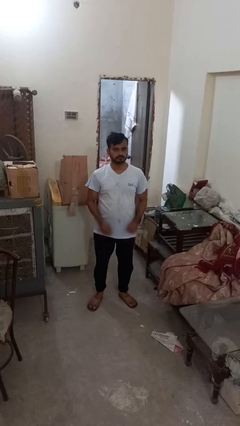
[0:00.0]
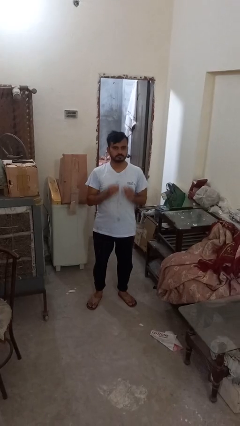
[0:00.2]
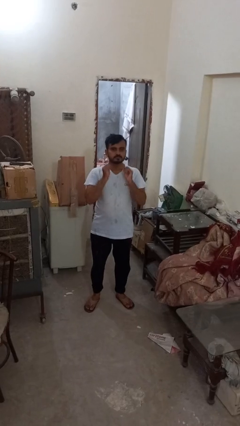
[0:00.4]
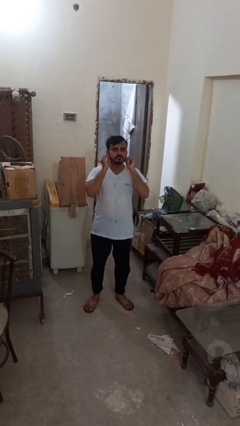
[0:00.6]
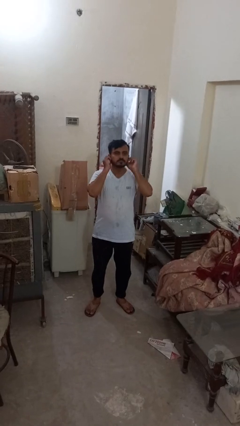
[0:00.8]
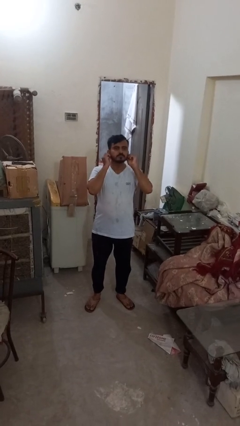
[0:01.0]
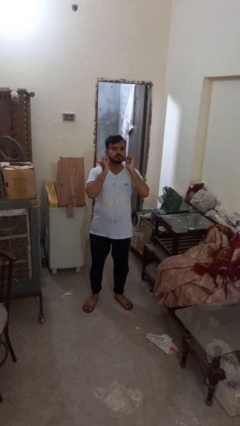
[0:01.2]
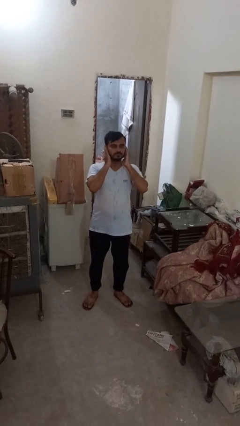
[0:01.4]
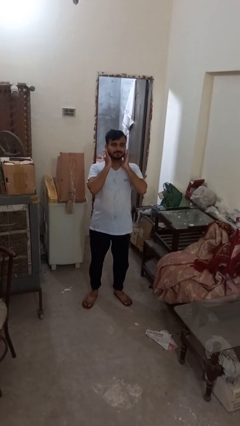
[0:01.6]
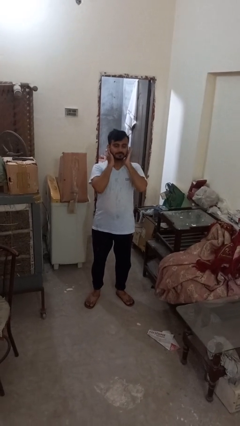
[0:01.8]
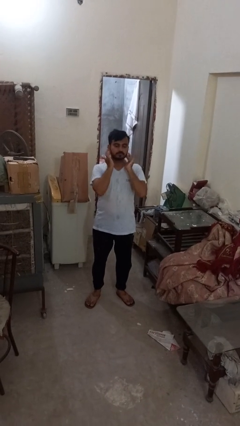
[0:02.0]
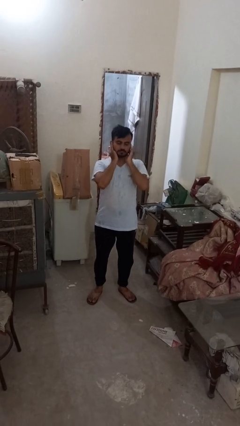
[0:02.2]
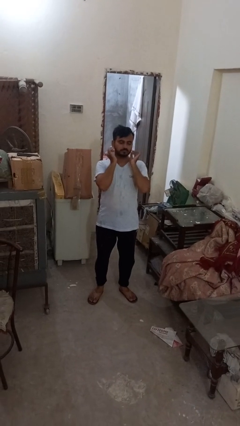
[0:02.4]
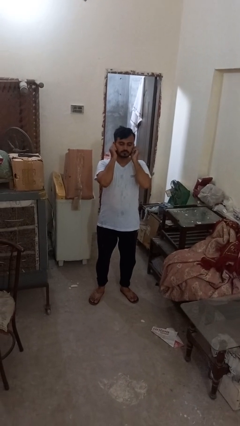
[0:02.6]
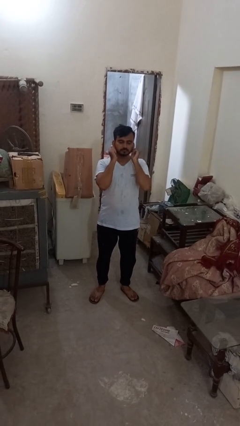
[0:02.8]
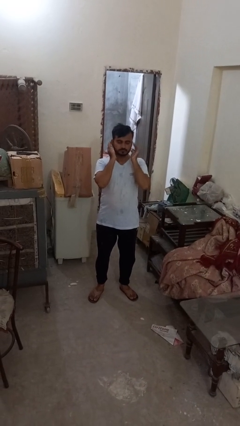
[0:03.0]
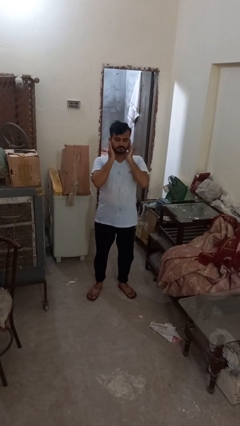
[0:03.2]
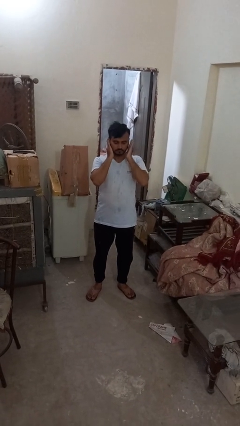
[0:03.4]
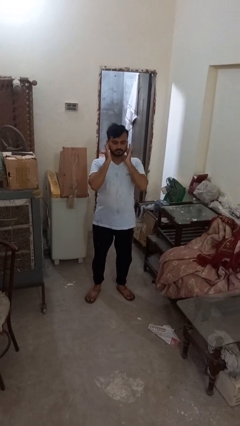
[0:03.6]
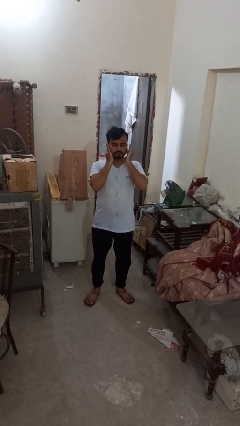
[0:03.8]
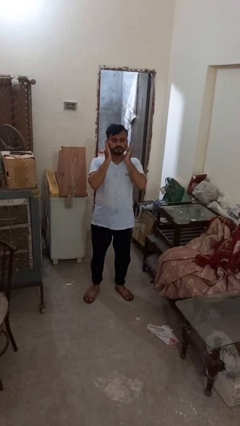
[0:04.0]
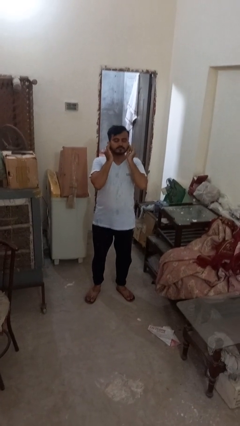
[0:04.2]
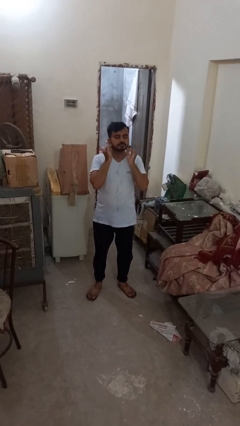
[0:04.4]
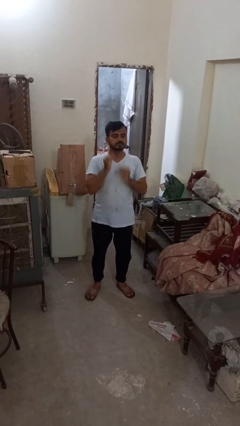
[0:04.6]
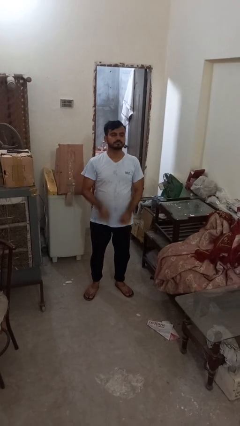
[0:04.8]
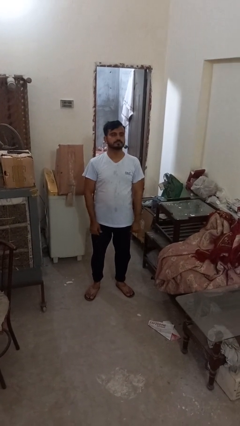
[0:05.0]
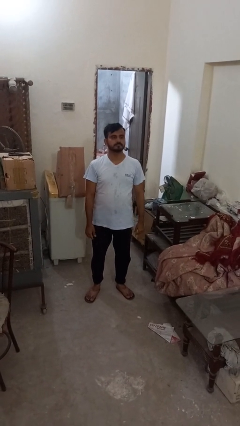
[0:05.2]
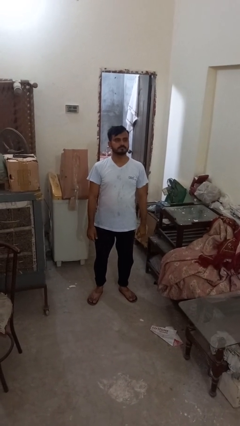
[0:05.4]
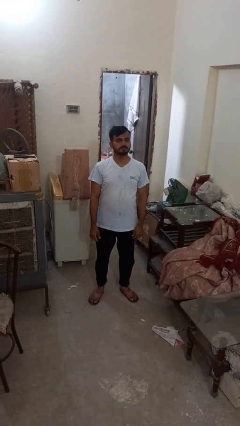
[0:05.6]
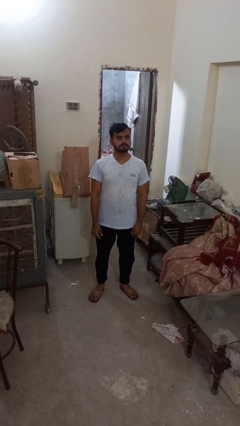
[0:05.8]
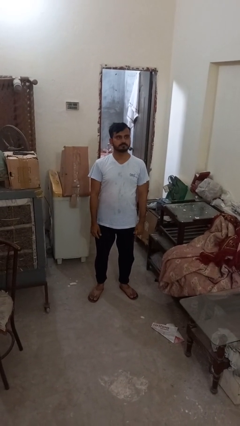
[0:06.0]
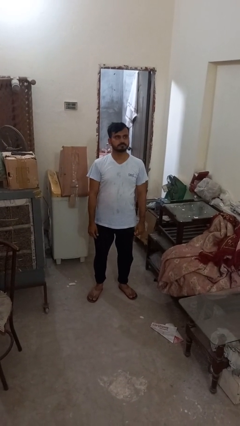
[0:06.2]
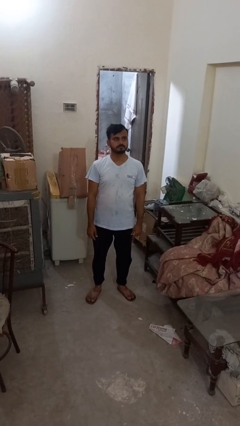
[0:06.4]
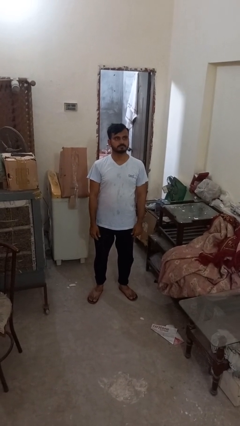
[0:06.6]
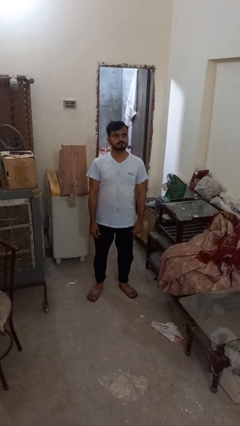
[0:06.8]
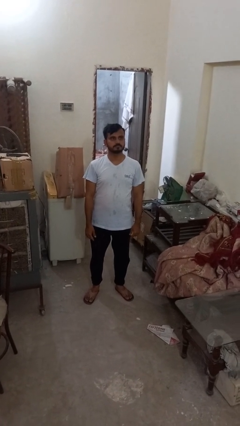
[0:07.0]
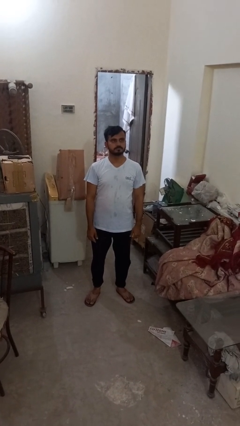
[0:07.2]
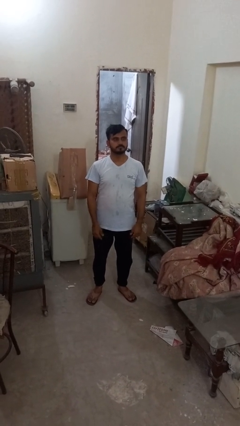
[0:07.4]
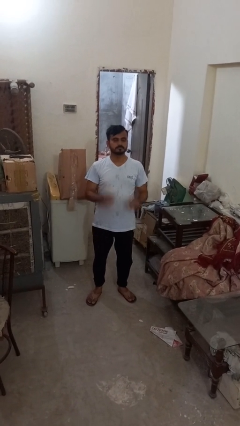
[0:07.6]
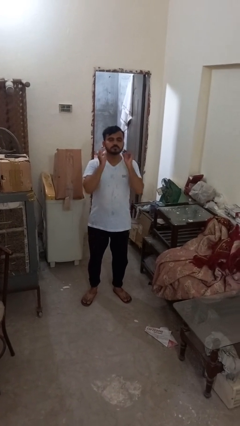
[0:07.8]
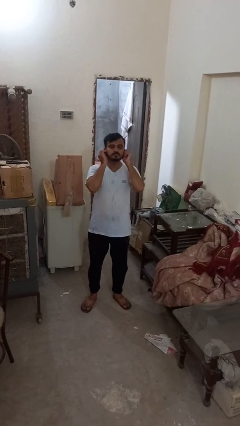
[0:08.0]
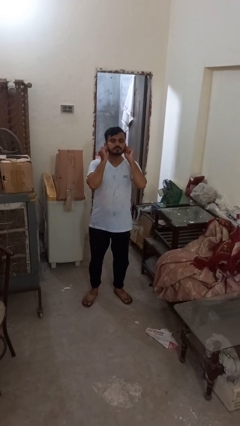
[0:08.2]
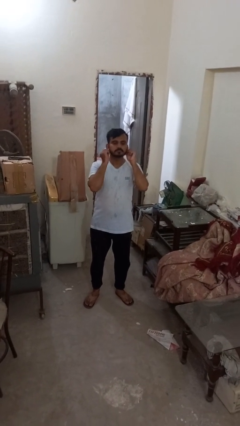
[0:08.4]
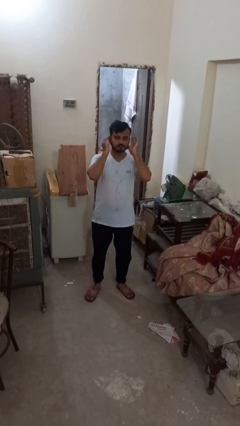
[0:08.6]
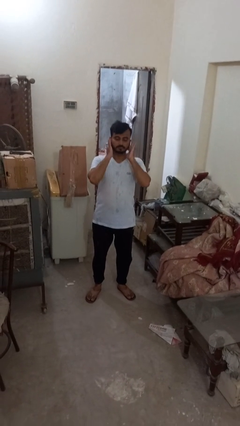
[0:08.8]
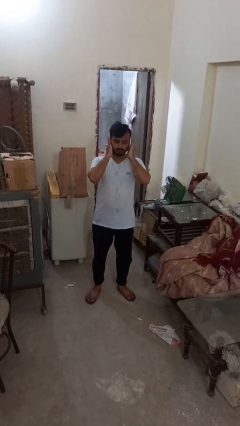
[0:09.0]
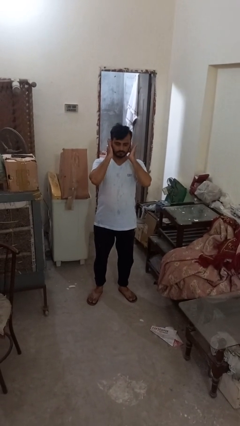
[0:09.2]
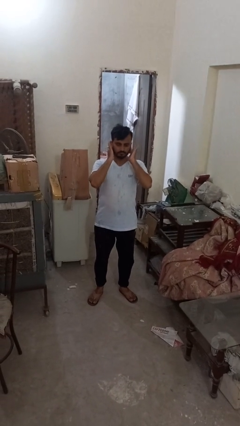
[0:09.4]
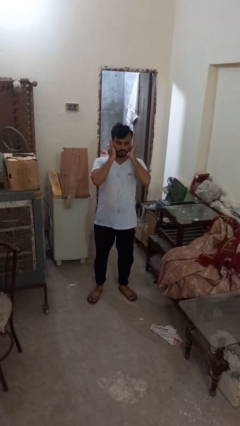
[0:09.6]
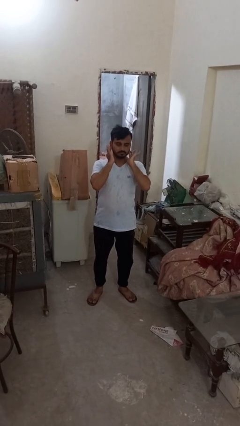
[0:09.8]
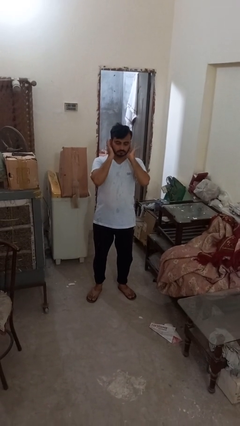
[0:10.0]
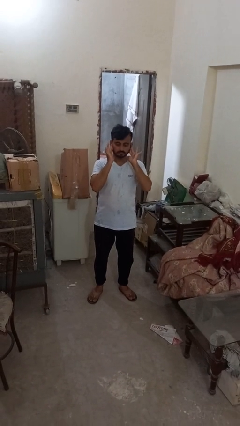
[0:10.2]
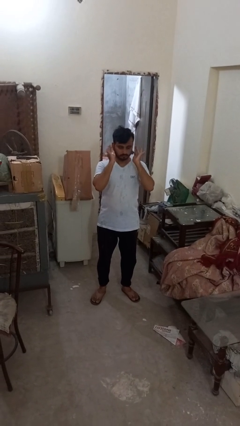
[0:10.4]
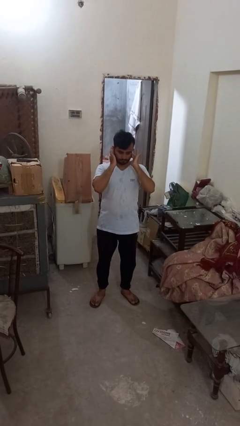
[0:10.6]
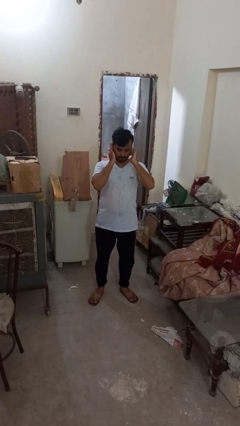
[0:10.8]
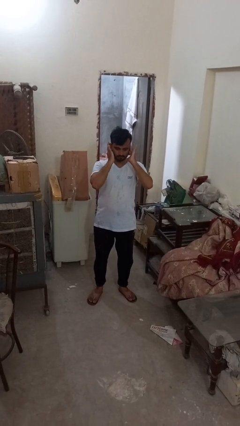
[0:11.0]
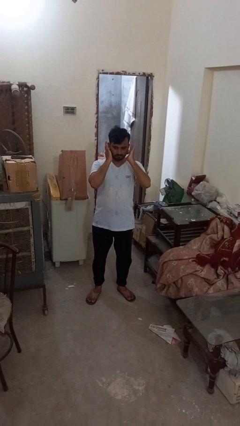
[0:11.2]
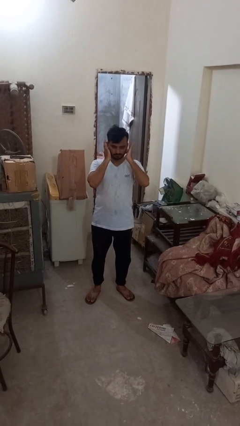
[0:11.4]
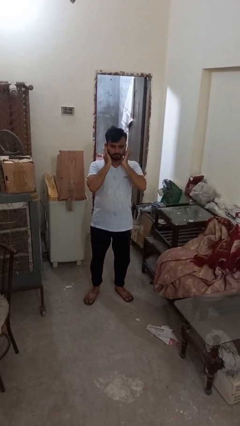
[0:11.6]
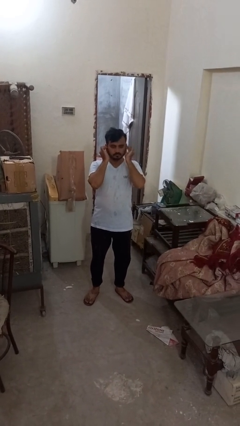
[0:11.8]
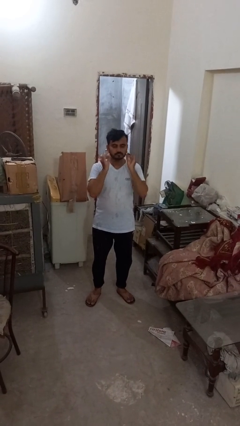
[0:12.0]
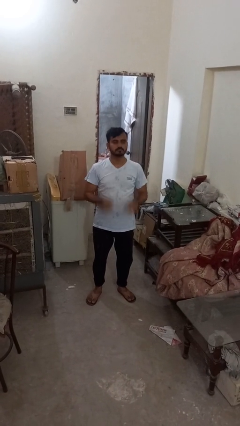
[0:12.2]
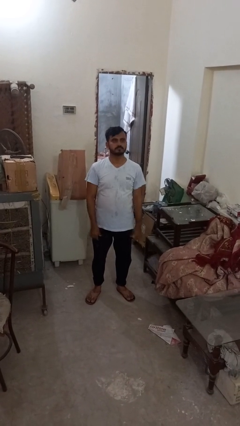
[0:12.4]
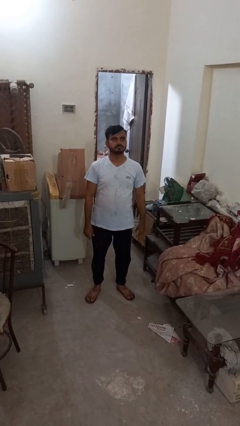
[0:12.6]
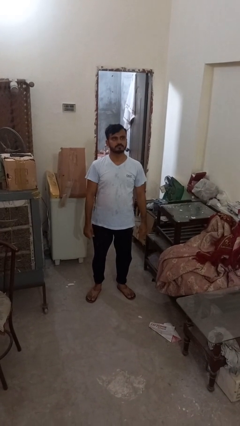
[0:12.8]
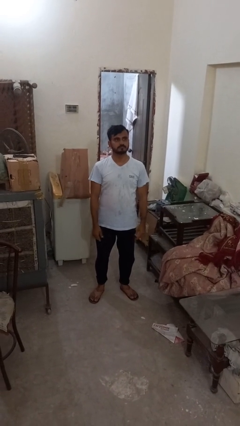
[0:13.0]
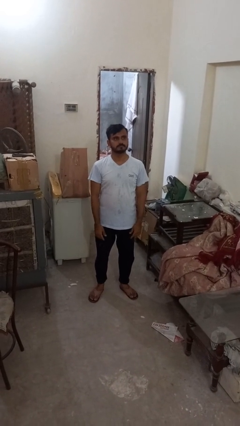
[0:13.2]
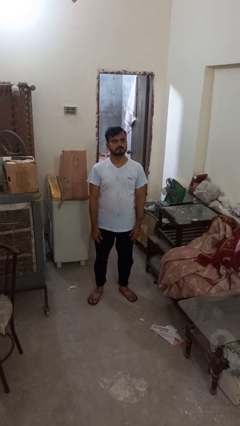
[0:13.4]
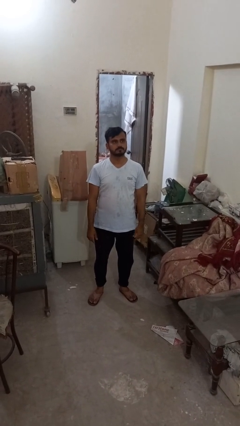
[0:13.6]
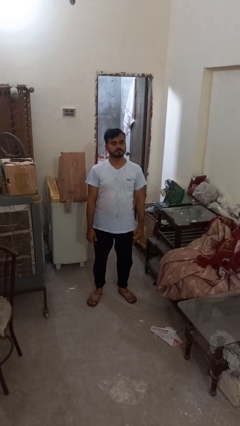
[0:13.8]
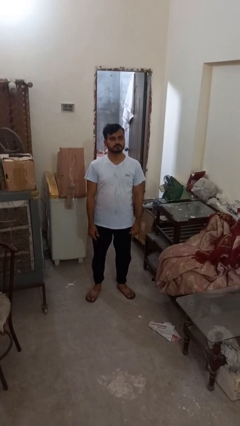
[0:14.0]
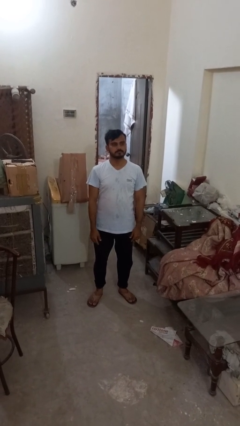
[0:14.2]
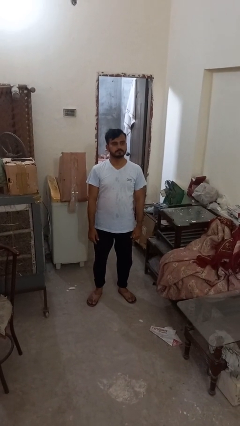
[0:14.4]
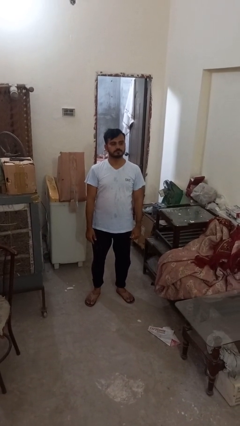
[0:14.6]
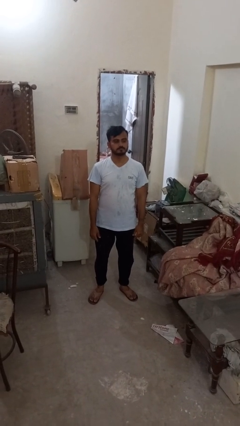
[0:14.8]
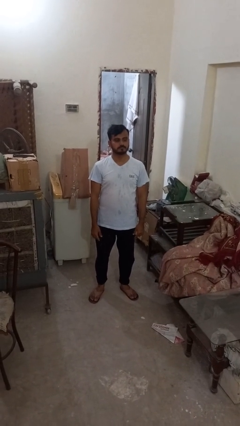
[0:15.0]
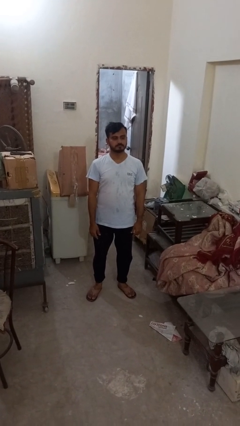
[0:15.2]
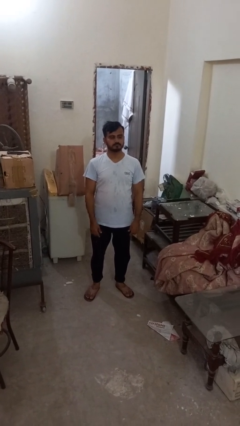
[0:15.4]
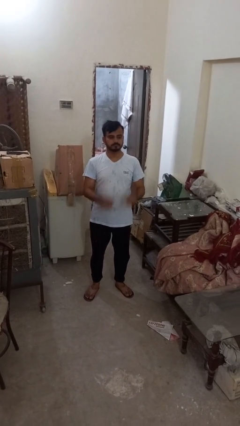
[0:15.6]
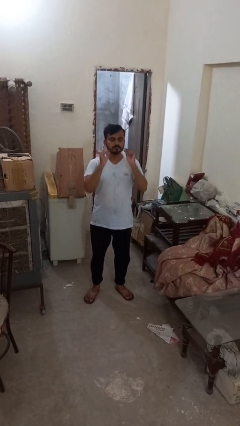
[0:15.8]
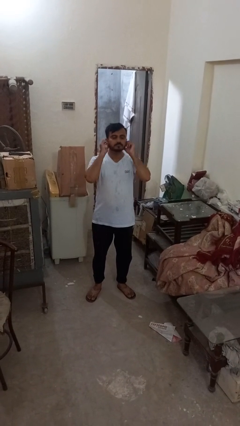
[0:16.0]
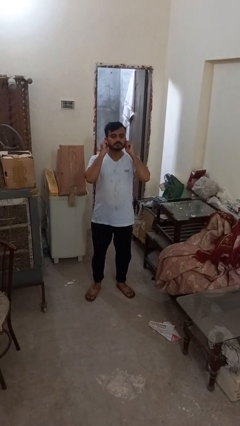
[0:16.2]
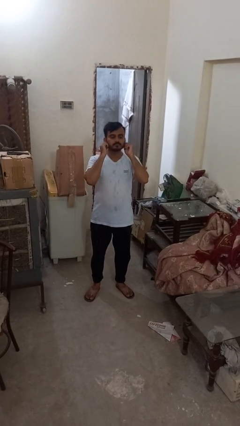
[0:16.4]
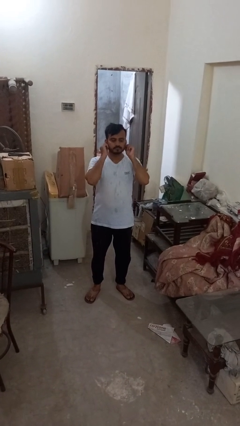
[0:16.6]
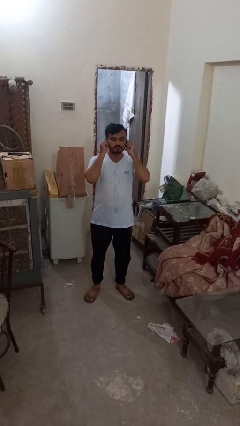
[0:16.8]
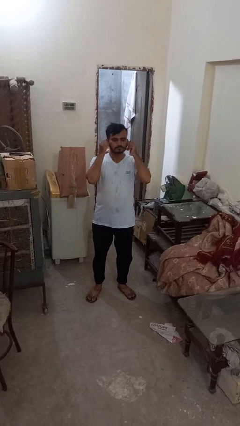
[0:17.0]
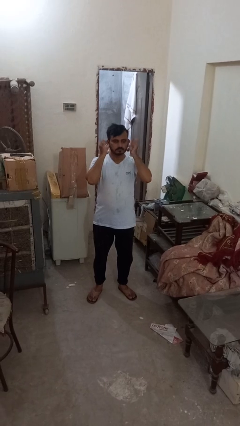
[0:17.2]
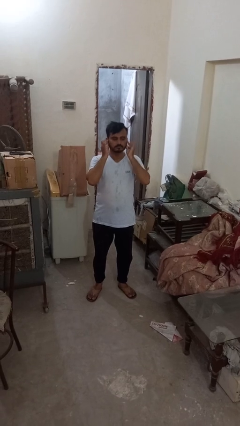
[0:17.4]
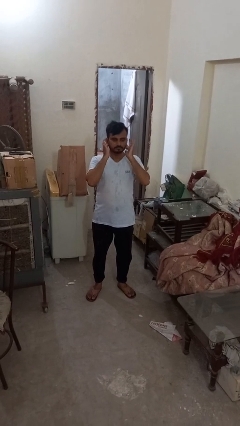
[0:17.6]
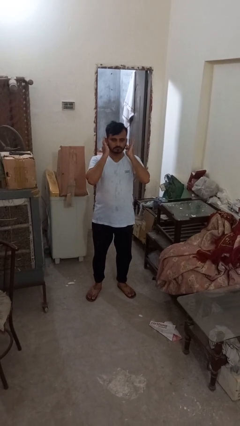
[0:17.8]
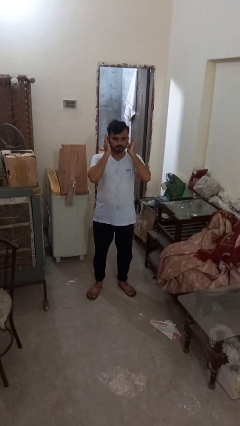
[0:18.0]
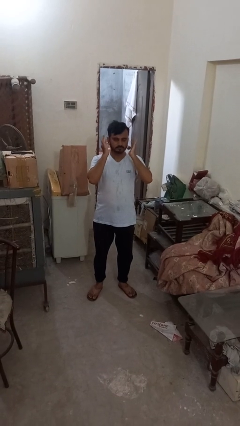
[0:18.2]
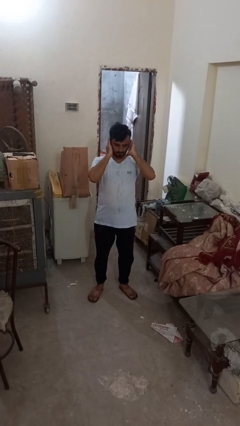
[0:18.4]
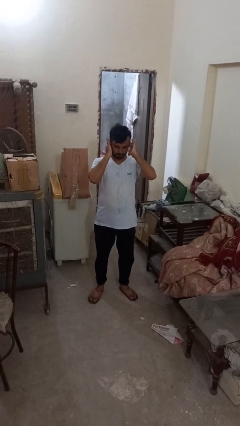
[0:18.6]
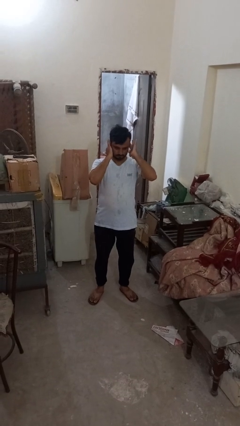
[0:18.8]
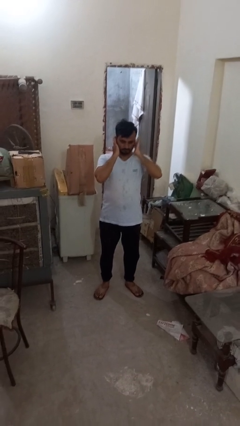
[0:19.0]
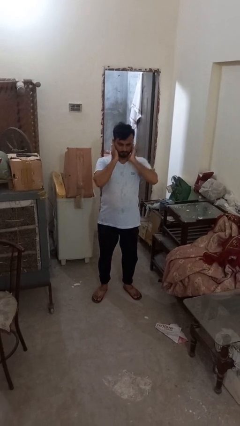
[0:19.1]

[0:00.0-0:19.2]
person touches earlobe
